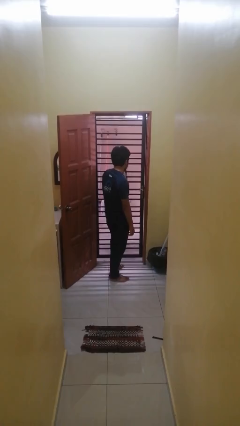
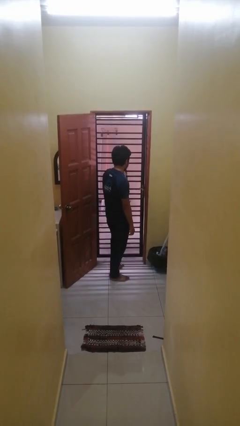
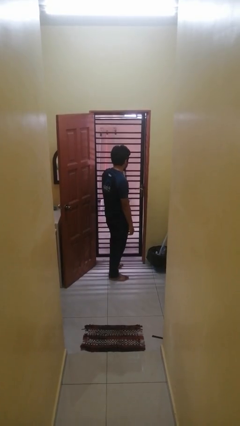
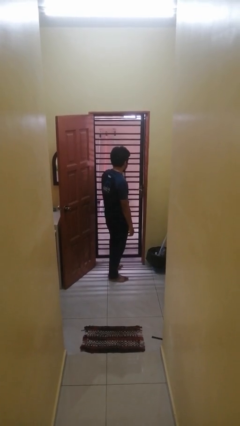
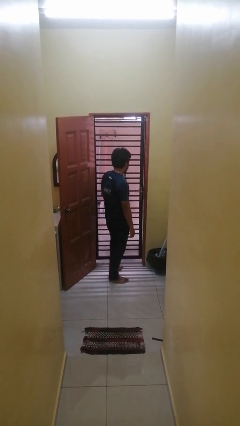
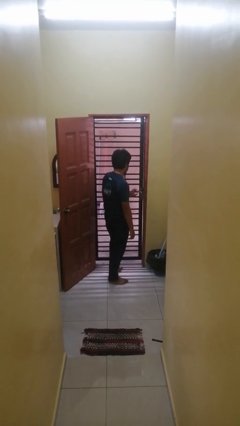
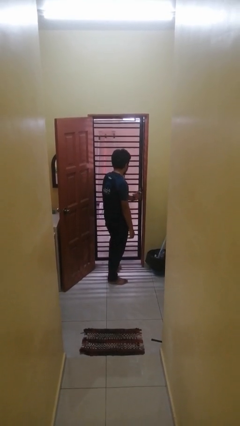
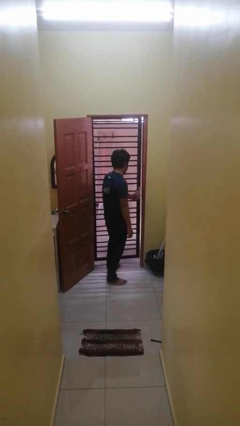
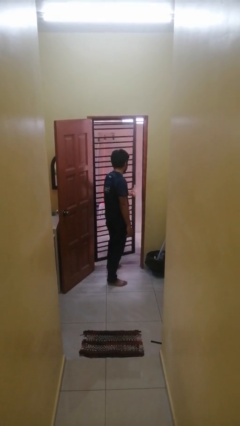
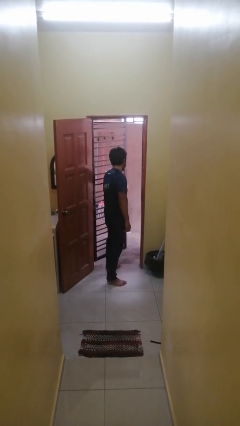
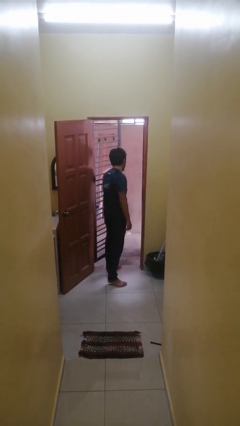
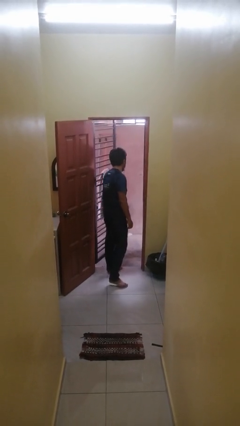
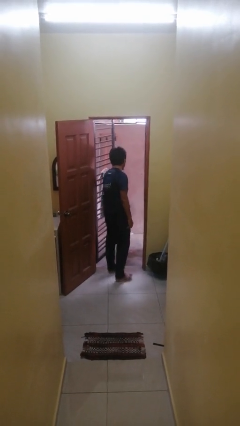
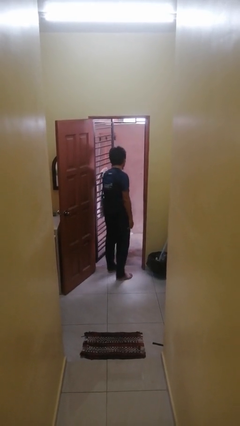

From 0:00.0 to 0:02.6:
person opens gate

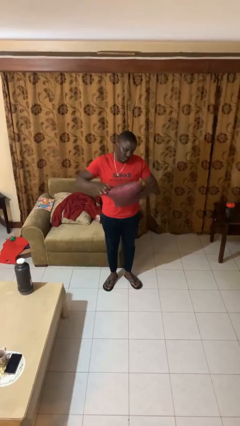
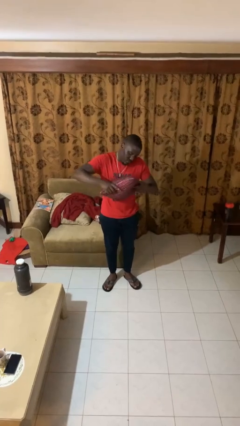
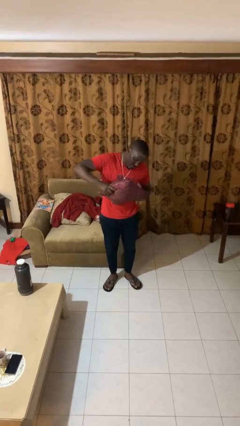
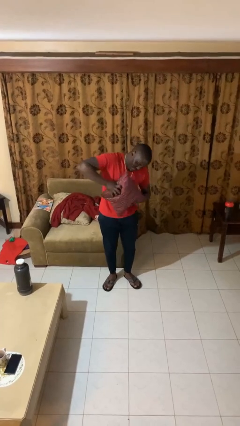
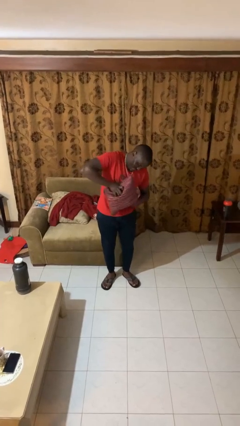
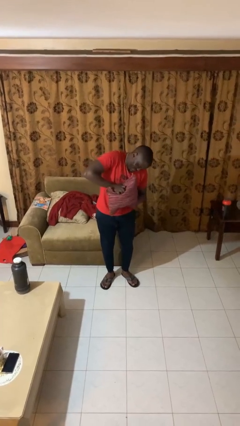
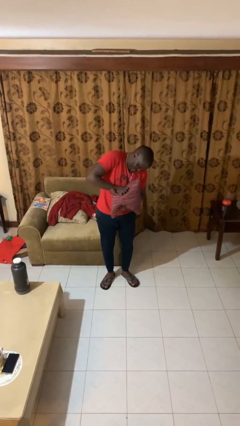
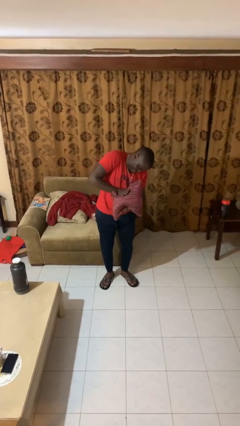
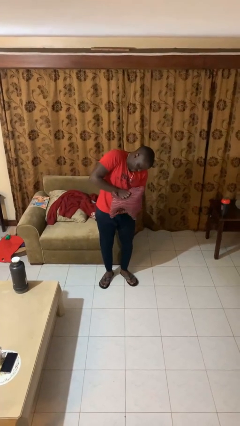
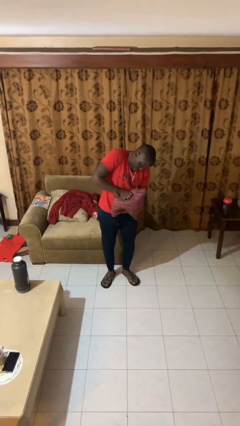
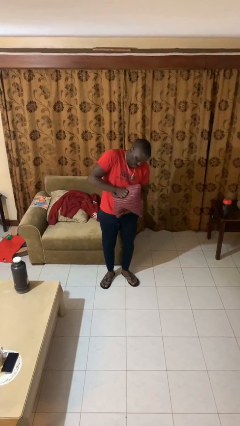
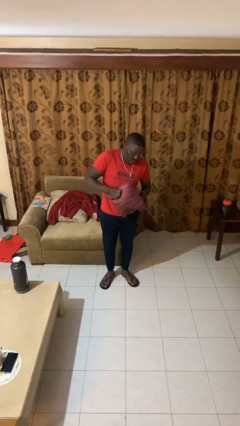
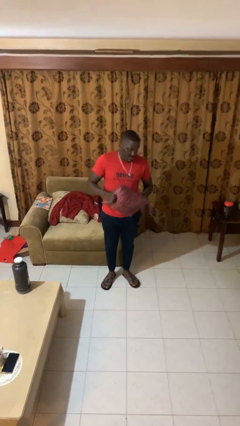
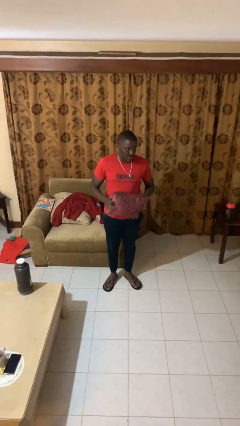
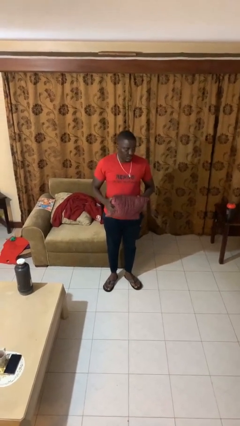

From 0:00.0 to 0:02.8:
person squeezes object

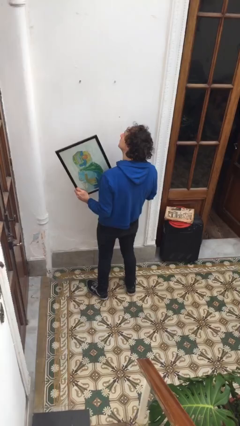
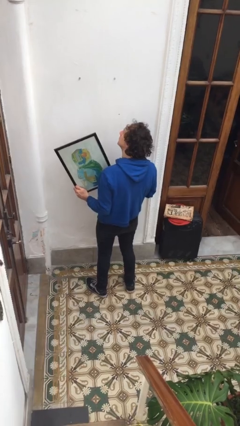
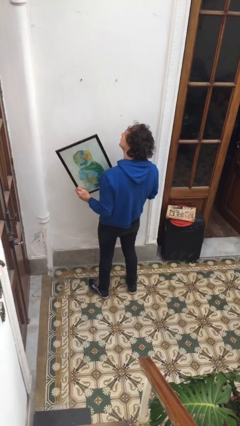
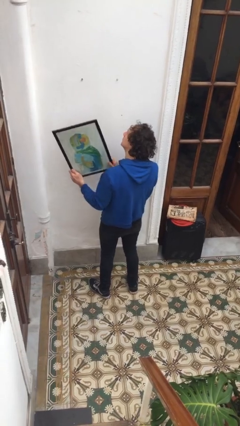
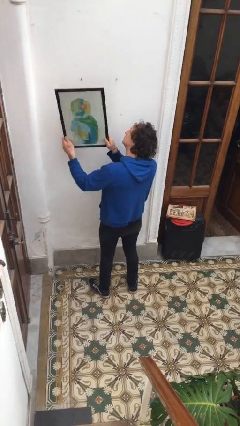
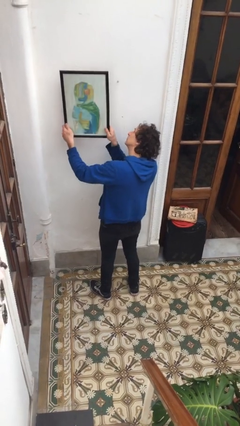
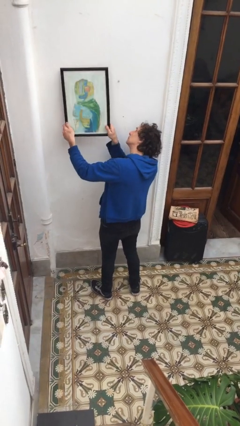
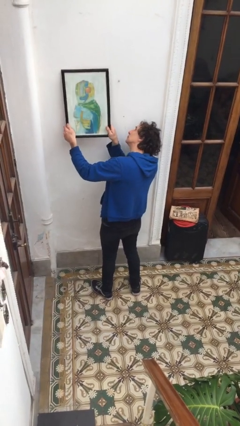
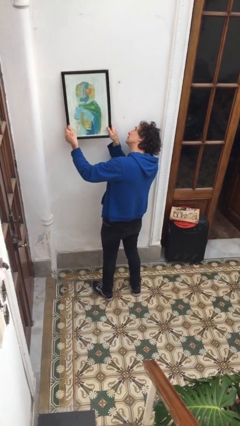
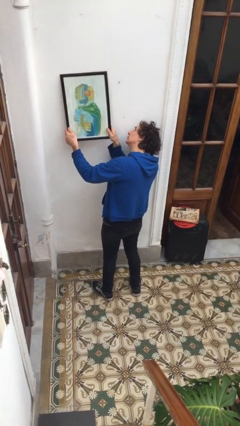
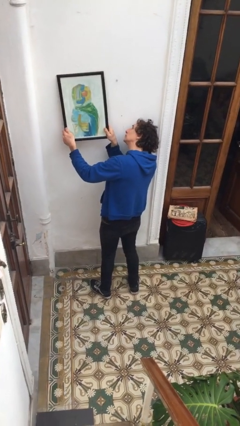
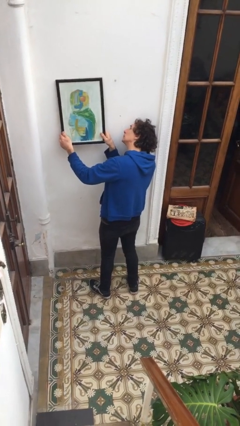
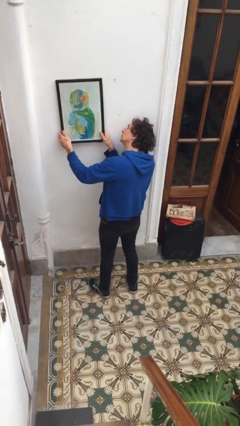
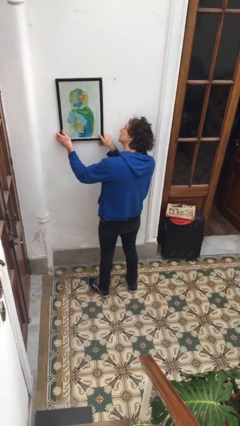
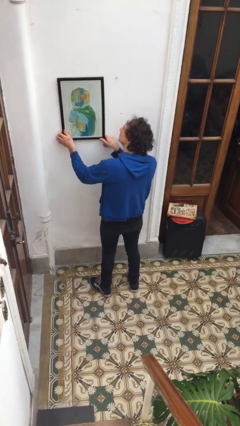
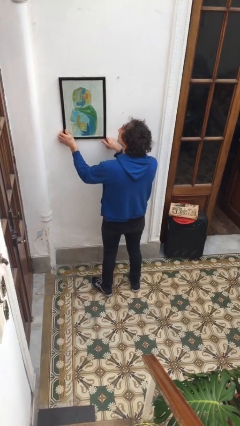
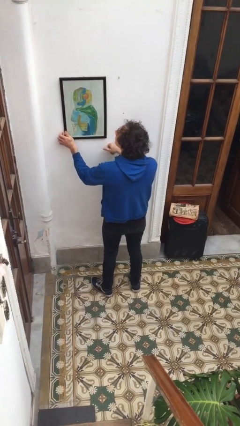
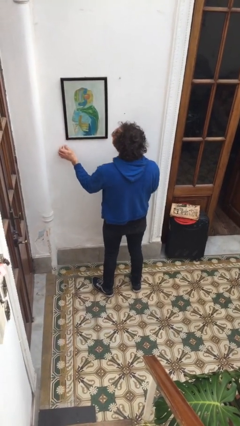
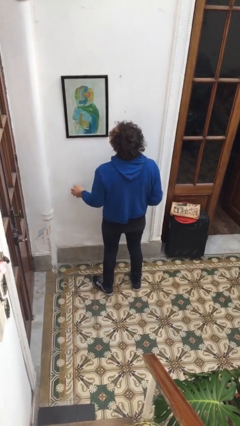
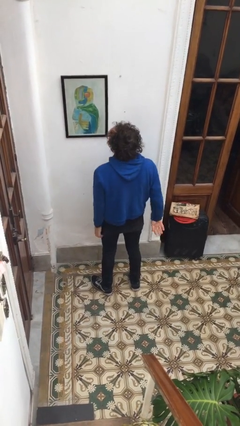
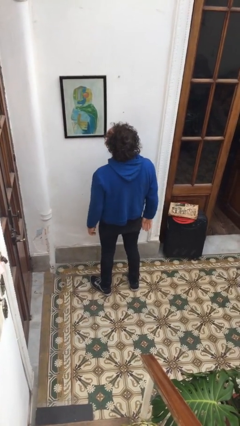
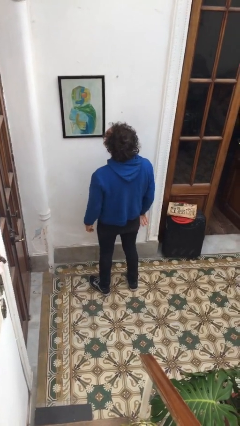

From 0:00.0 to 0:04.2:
person puts up picture frame

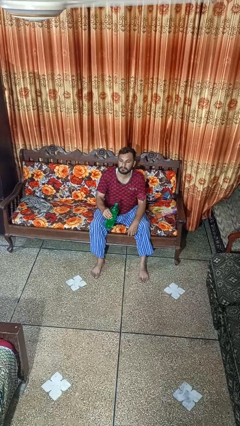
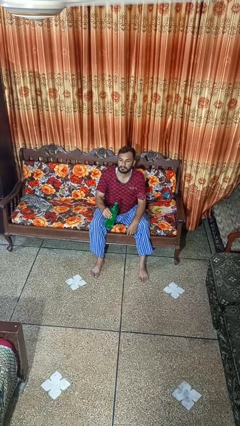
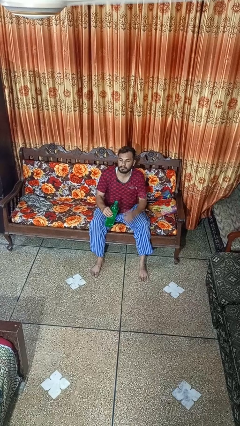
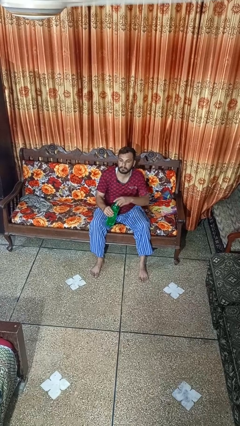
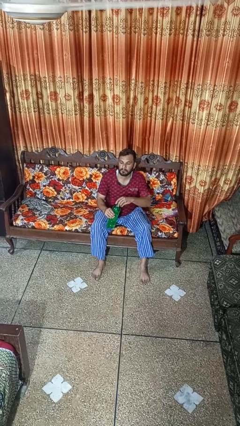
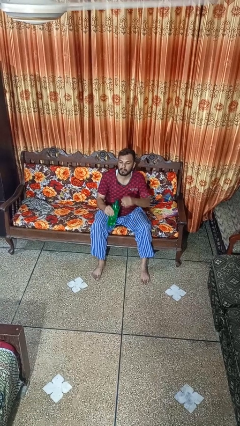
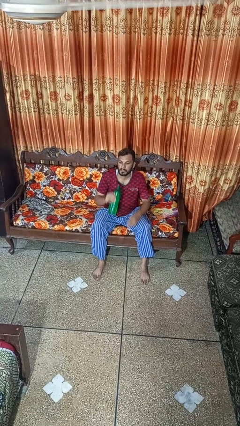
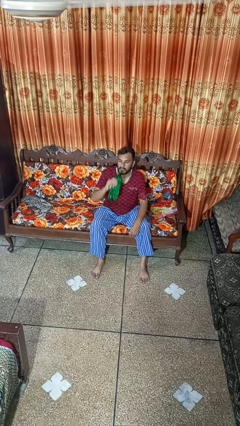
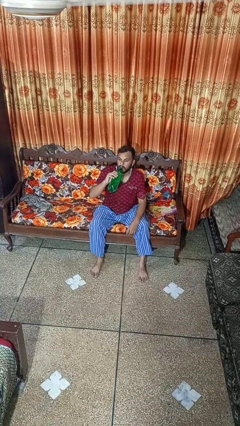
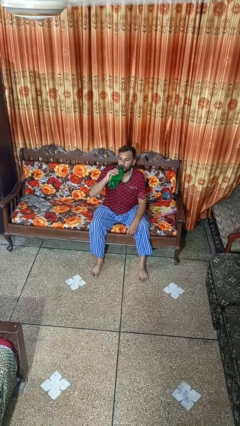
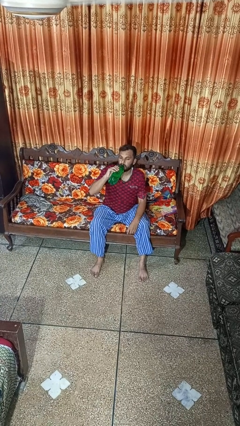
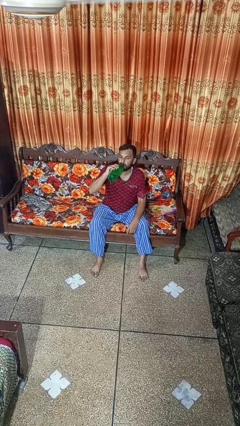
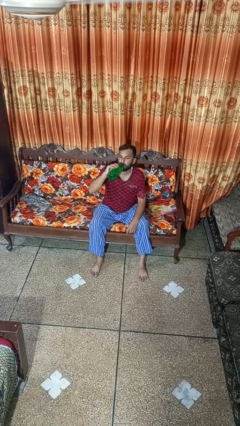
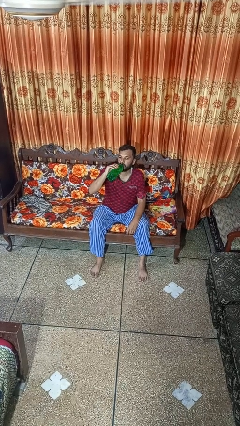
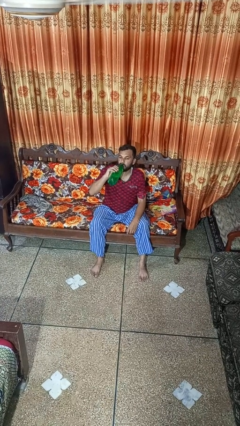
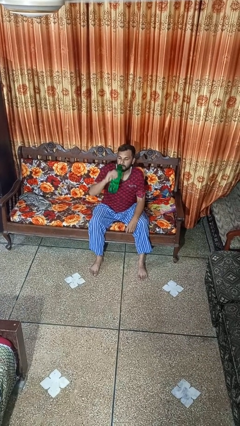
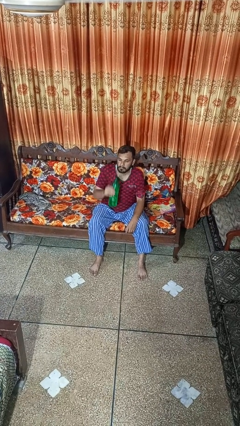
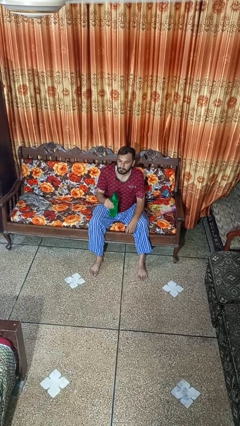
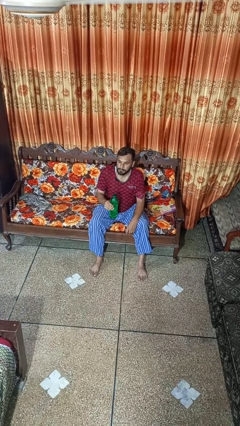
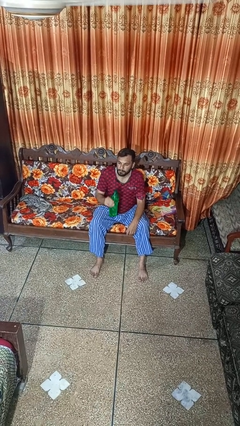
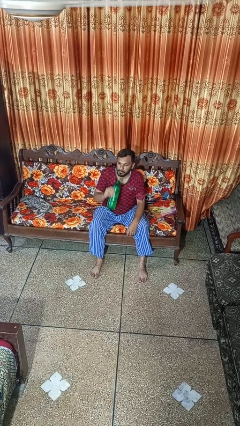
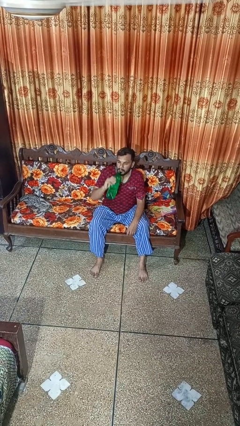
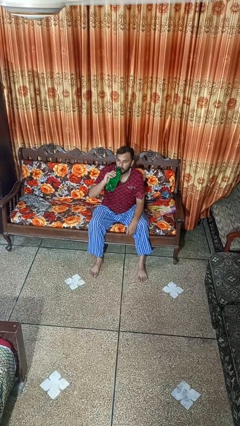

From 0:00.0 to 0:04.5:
person drinks from bottle

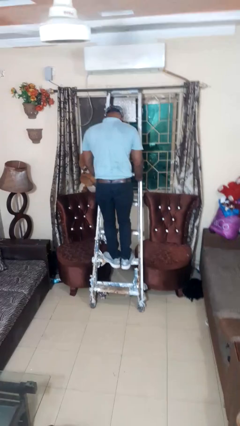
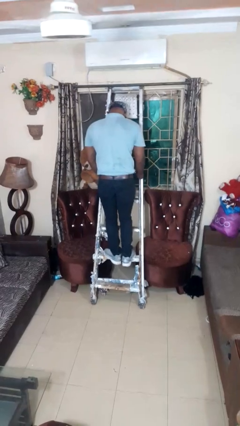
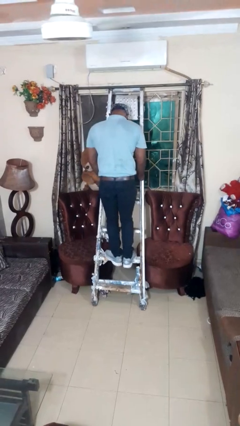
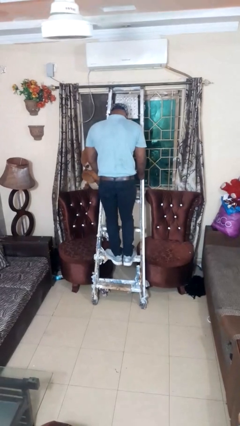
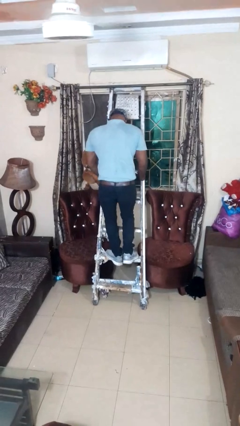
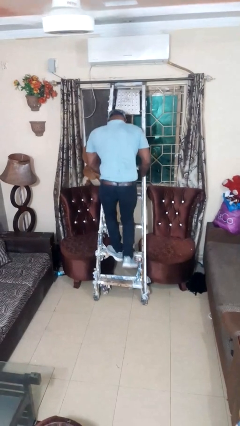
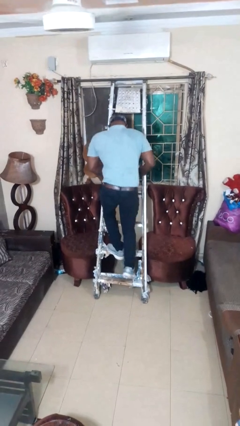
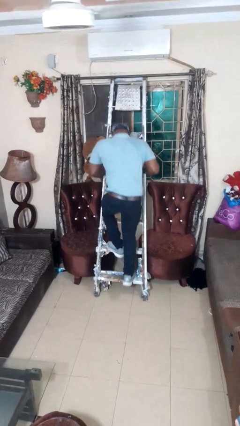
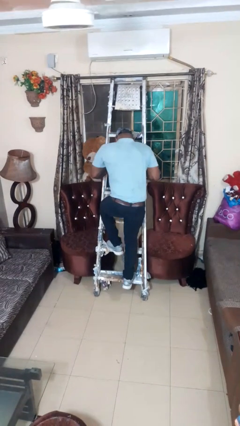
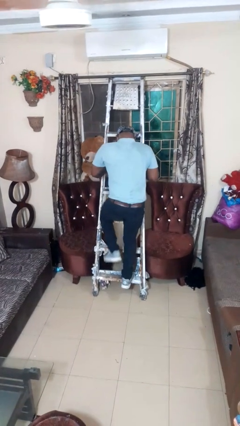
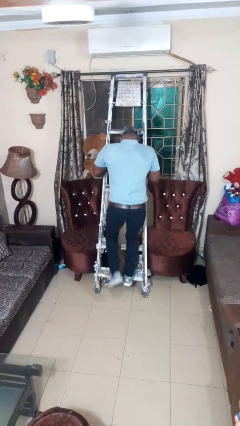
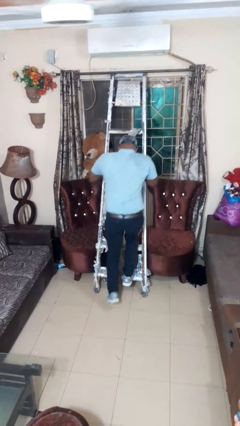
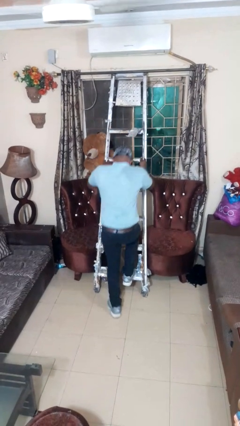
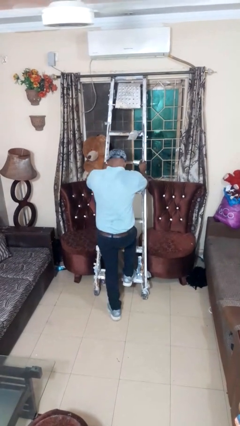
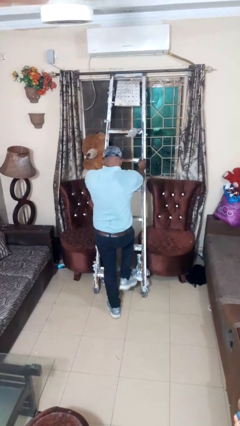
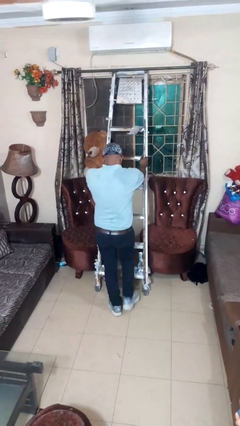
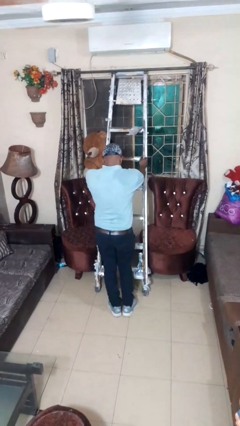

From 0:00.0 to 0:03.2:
person climbs down ladder

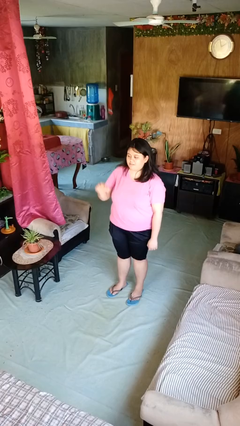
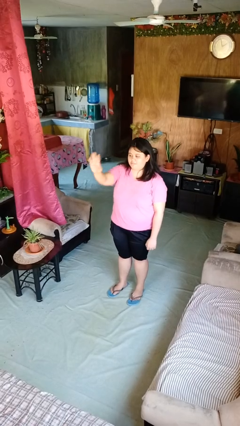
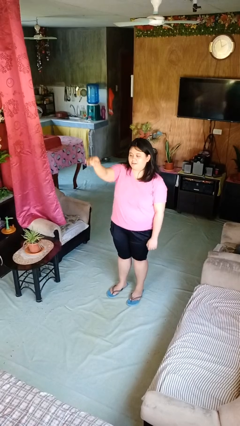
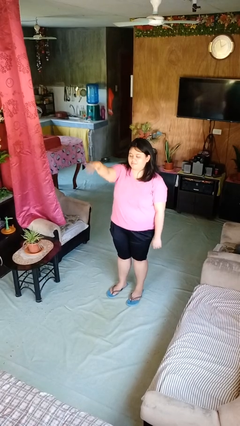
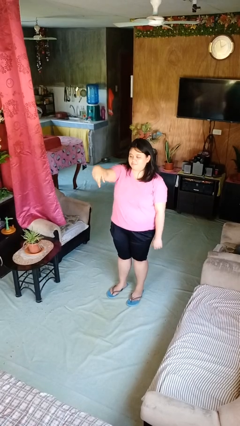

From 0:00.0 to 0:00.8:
person gestures come here
